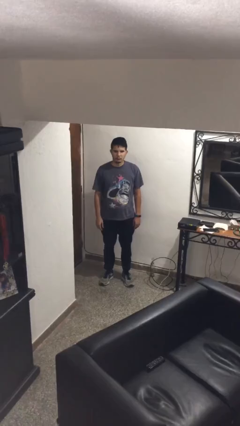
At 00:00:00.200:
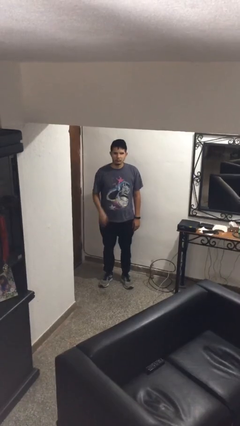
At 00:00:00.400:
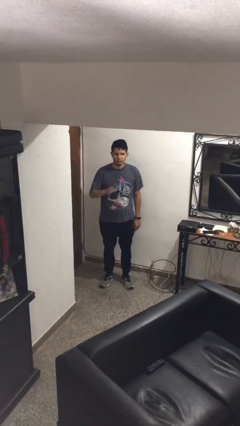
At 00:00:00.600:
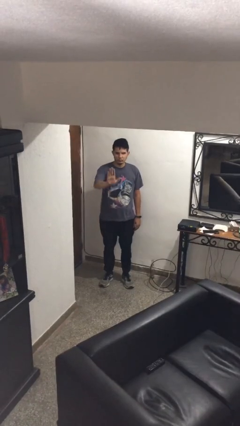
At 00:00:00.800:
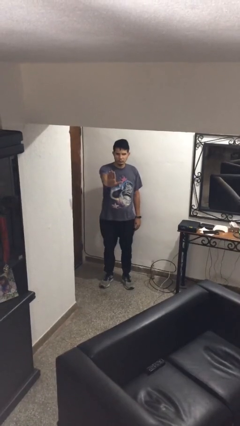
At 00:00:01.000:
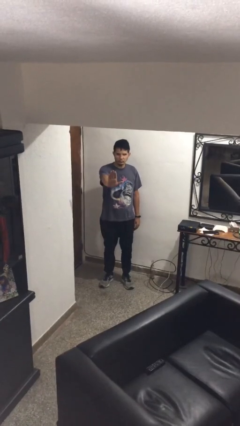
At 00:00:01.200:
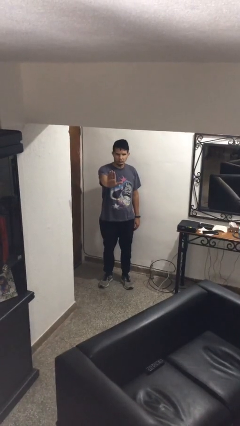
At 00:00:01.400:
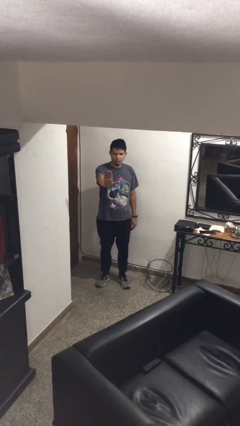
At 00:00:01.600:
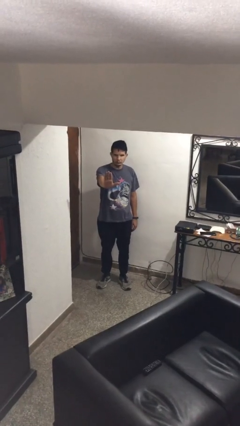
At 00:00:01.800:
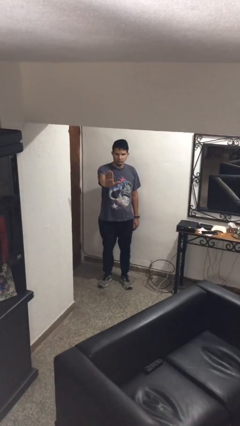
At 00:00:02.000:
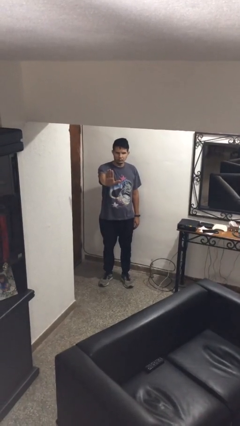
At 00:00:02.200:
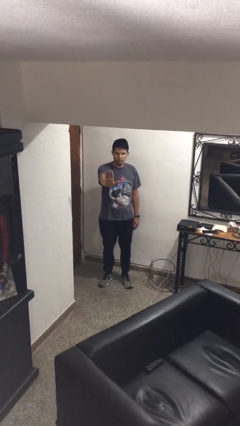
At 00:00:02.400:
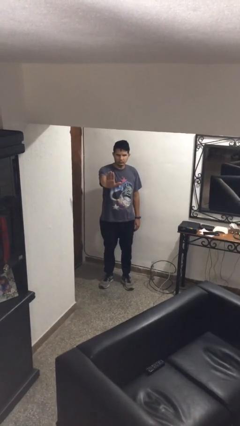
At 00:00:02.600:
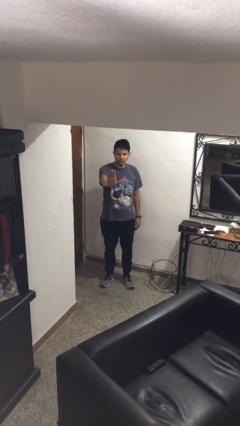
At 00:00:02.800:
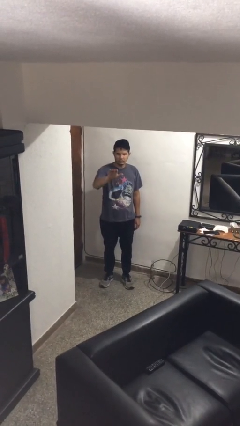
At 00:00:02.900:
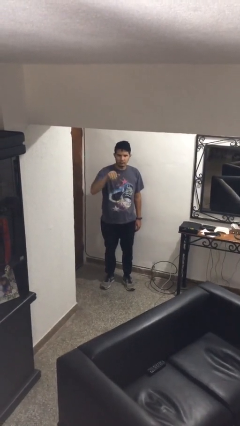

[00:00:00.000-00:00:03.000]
person gestures stop

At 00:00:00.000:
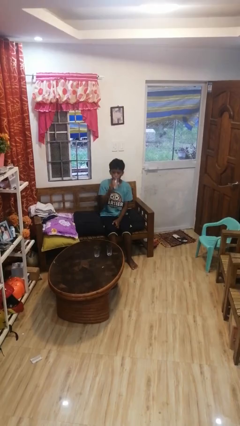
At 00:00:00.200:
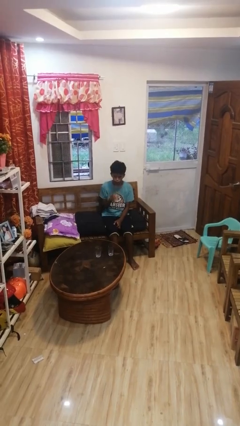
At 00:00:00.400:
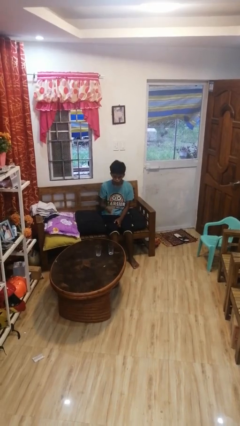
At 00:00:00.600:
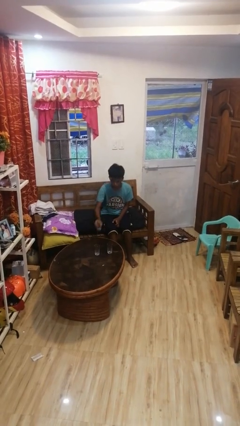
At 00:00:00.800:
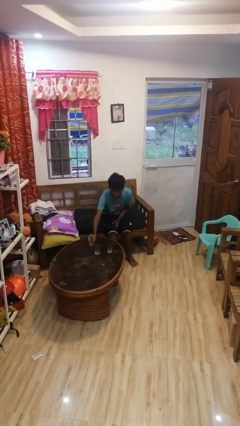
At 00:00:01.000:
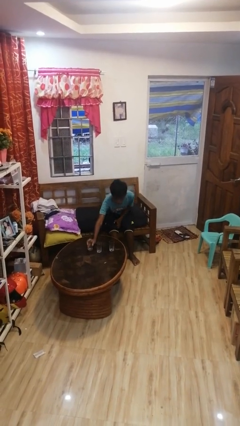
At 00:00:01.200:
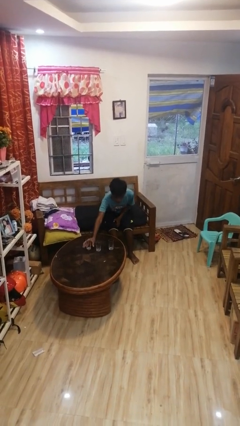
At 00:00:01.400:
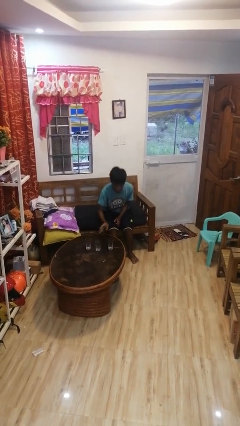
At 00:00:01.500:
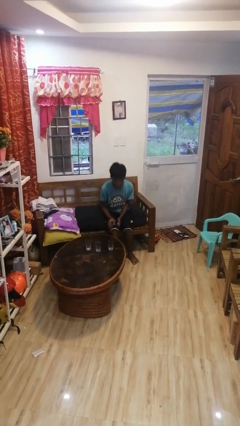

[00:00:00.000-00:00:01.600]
person puts down object on table

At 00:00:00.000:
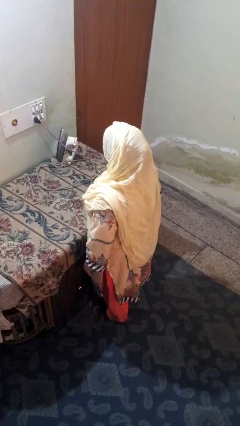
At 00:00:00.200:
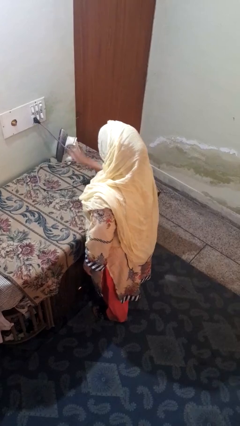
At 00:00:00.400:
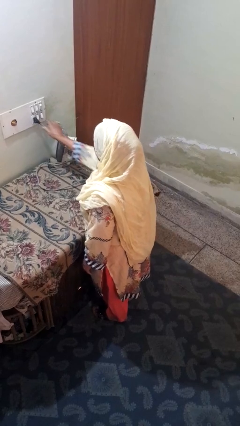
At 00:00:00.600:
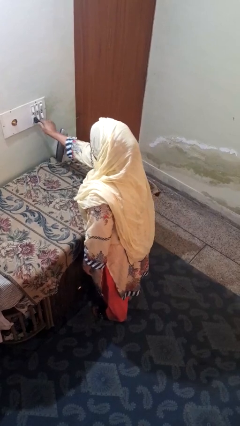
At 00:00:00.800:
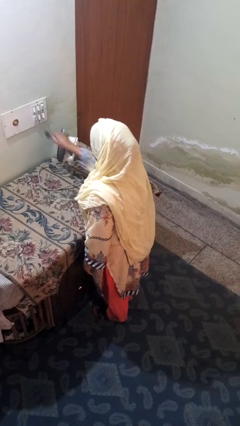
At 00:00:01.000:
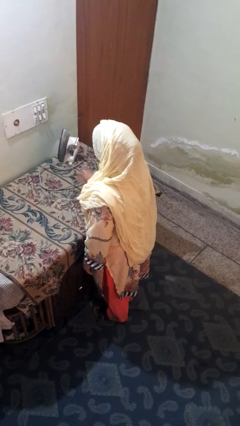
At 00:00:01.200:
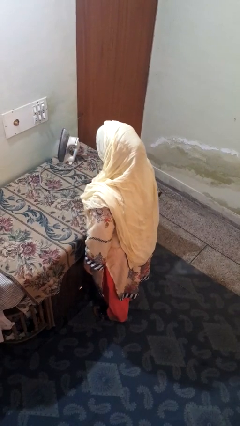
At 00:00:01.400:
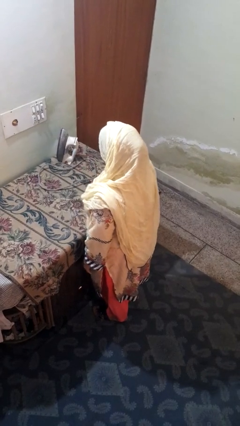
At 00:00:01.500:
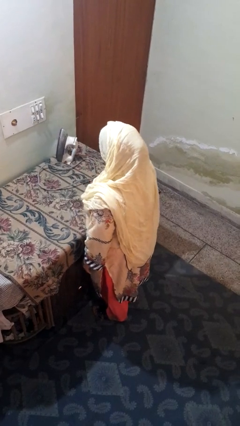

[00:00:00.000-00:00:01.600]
person unplugs from electrical socket

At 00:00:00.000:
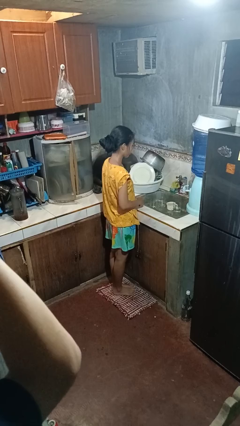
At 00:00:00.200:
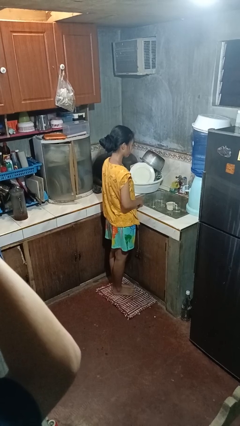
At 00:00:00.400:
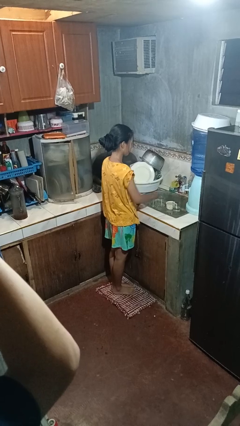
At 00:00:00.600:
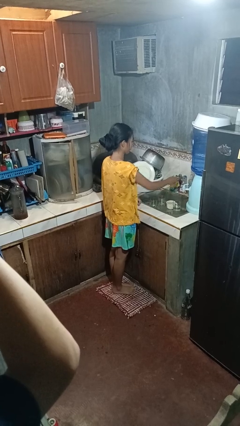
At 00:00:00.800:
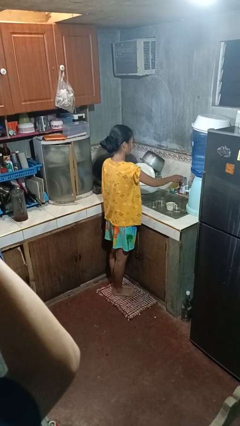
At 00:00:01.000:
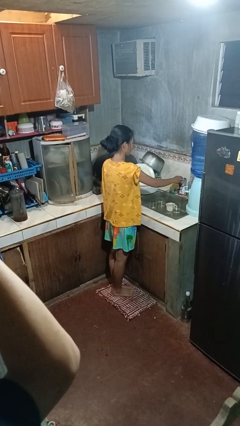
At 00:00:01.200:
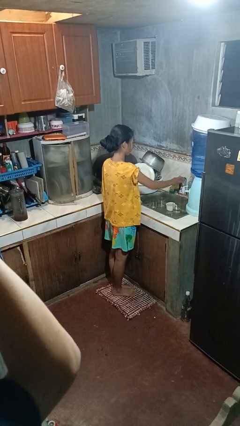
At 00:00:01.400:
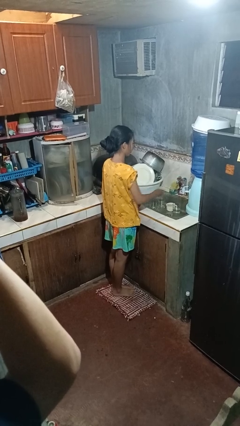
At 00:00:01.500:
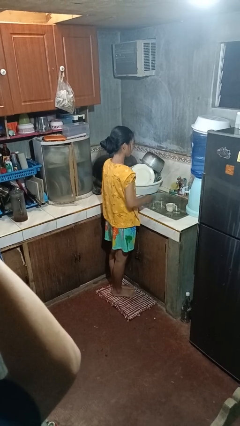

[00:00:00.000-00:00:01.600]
person turns on faucet

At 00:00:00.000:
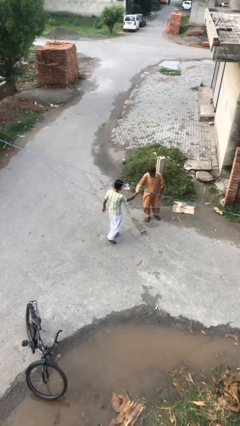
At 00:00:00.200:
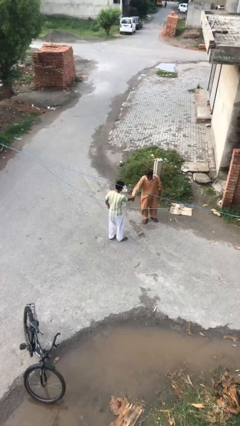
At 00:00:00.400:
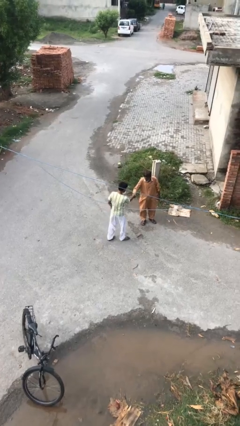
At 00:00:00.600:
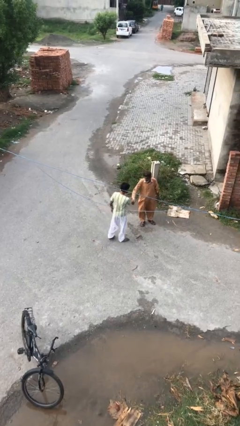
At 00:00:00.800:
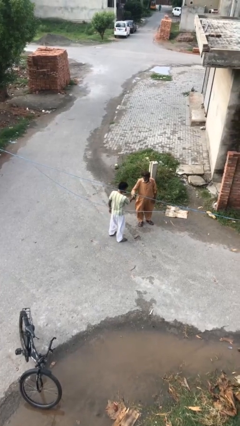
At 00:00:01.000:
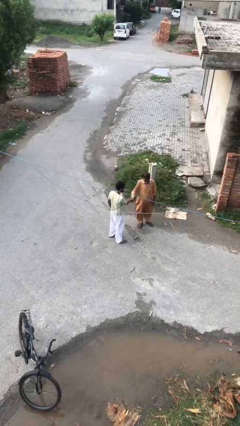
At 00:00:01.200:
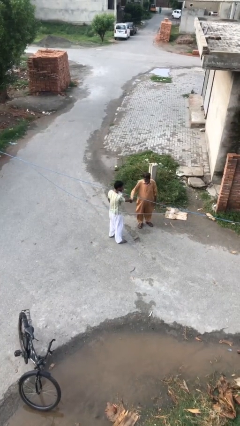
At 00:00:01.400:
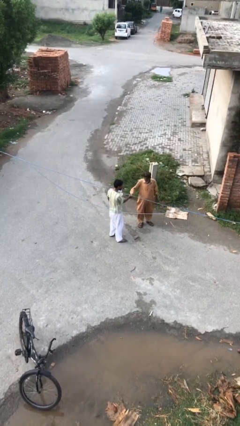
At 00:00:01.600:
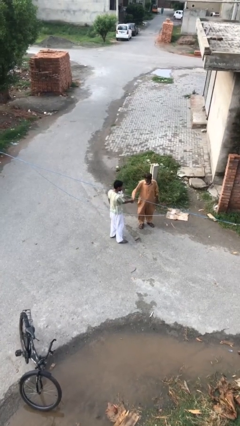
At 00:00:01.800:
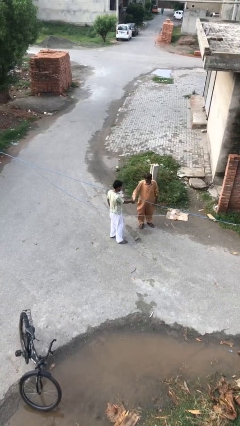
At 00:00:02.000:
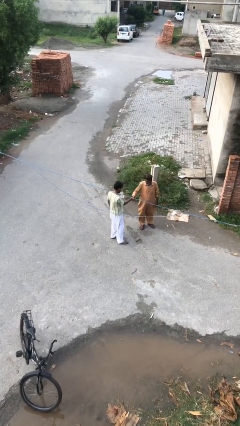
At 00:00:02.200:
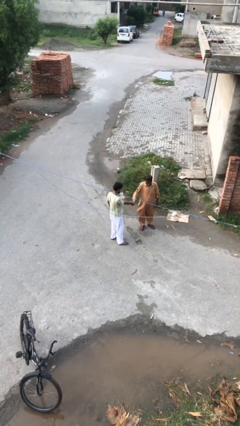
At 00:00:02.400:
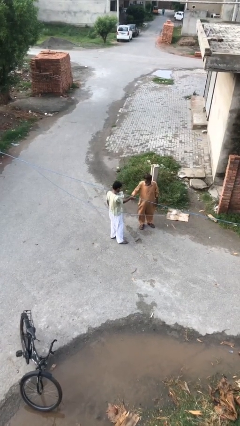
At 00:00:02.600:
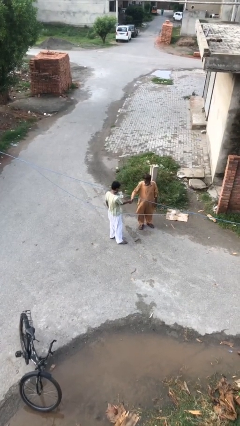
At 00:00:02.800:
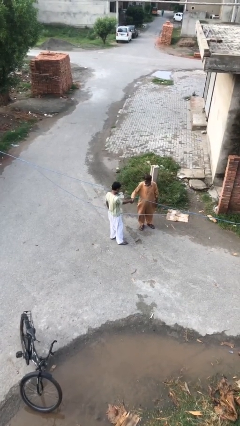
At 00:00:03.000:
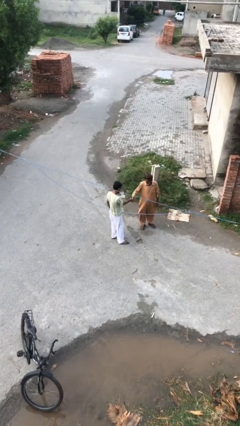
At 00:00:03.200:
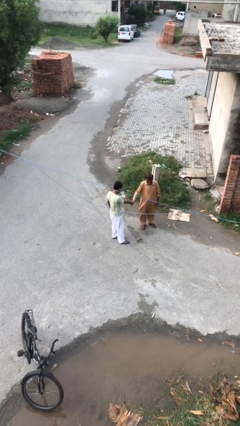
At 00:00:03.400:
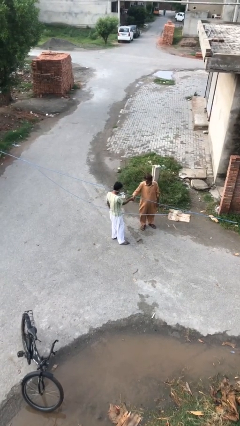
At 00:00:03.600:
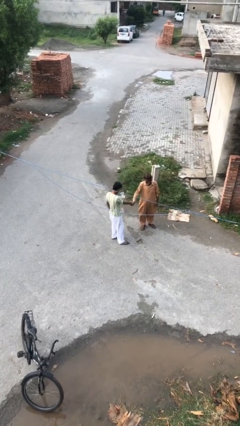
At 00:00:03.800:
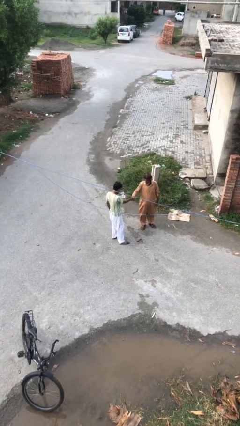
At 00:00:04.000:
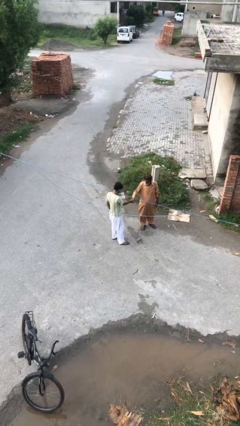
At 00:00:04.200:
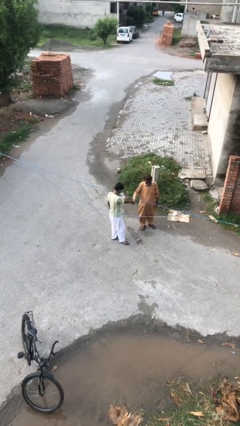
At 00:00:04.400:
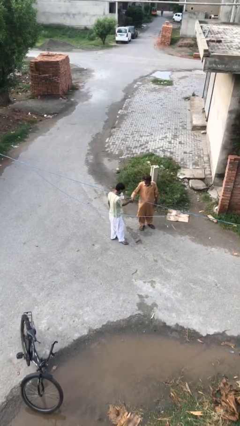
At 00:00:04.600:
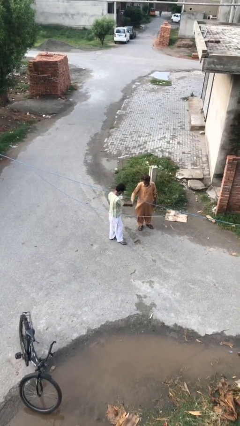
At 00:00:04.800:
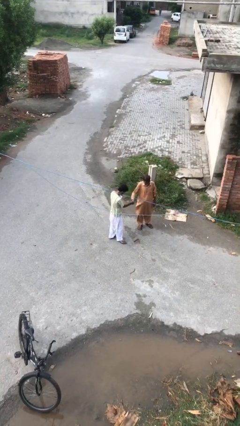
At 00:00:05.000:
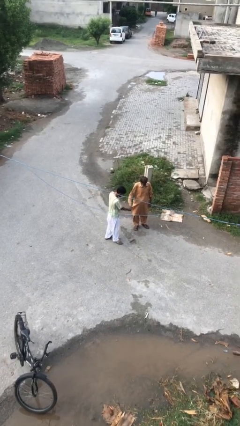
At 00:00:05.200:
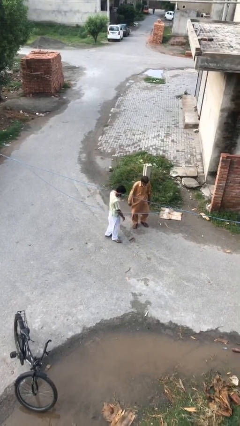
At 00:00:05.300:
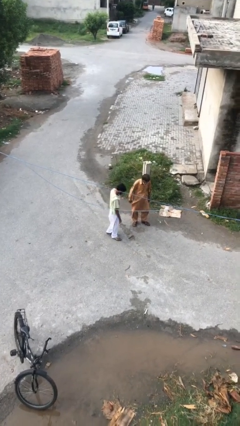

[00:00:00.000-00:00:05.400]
person shakes hand

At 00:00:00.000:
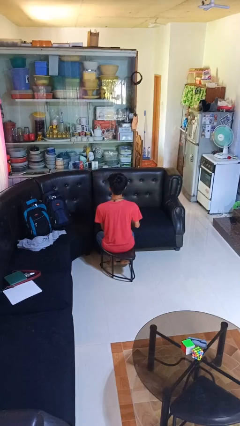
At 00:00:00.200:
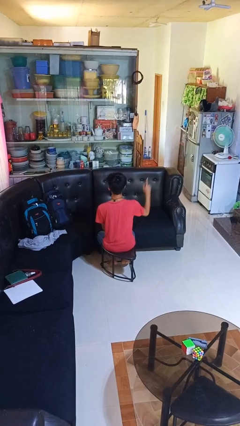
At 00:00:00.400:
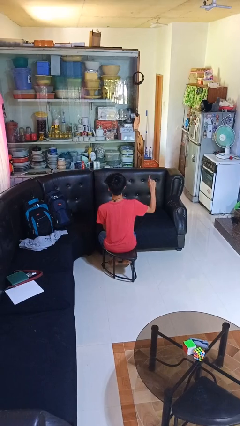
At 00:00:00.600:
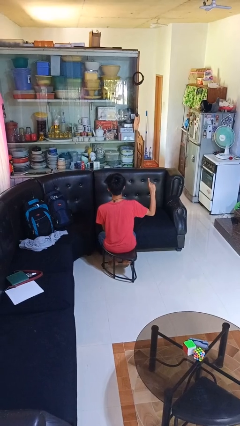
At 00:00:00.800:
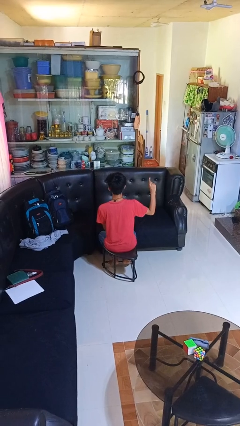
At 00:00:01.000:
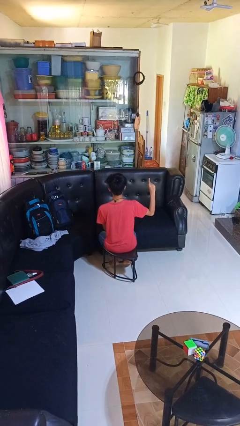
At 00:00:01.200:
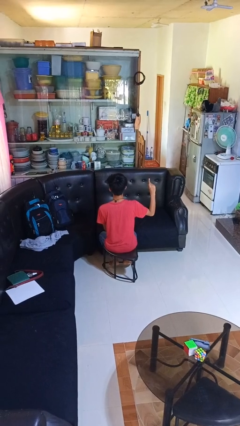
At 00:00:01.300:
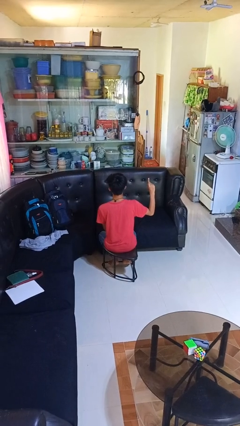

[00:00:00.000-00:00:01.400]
person gestures number one

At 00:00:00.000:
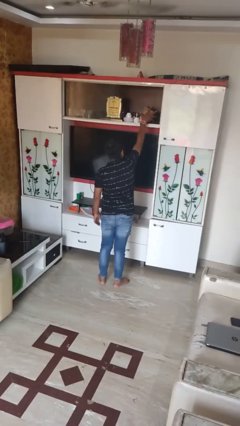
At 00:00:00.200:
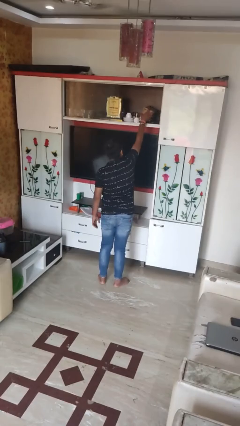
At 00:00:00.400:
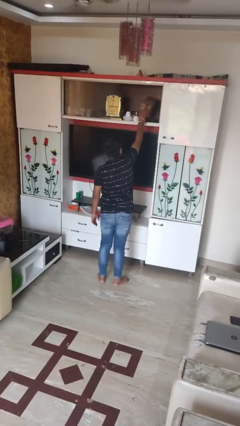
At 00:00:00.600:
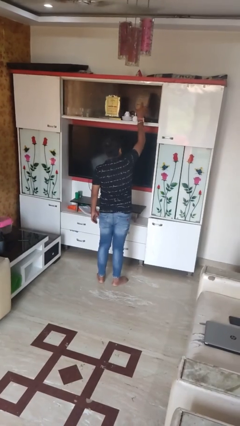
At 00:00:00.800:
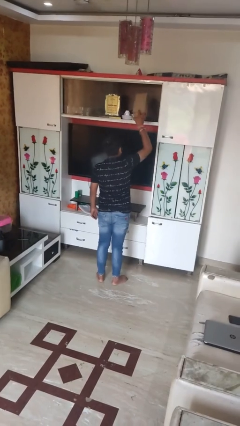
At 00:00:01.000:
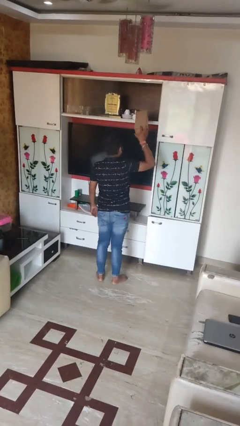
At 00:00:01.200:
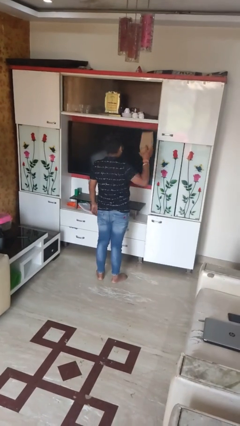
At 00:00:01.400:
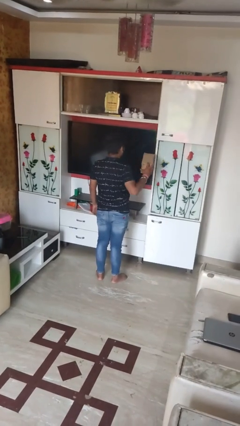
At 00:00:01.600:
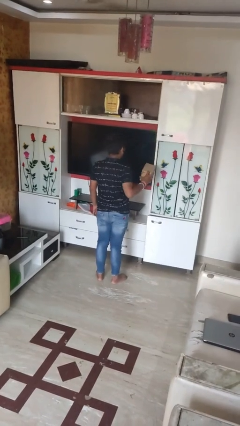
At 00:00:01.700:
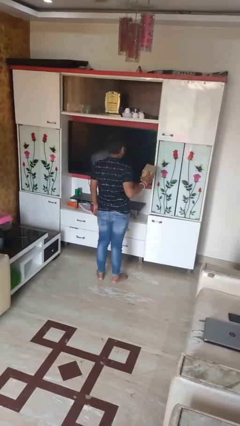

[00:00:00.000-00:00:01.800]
person picks up object from shelf

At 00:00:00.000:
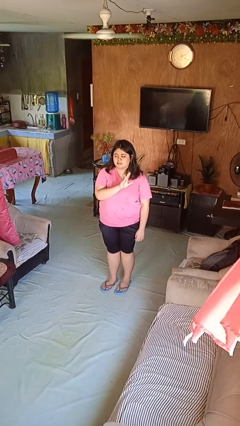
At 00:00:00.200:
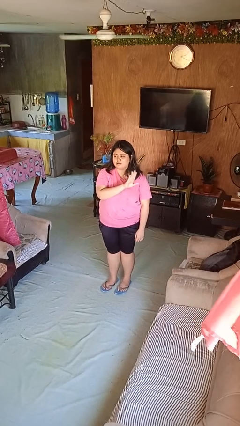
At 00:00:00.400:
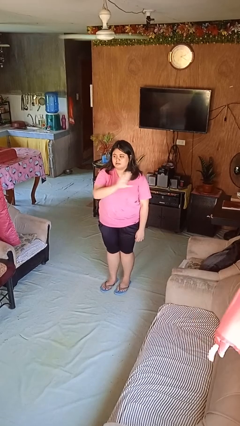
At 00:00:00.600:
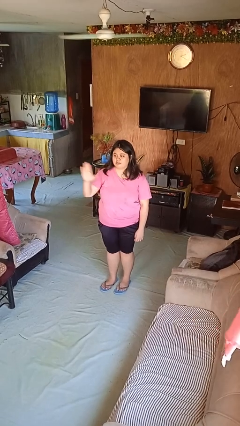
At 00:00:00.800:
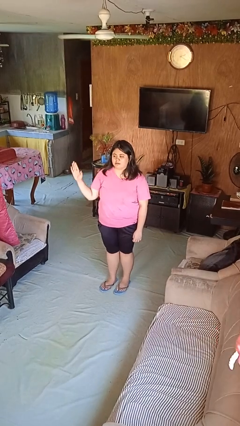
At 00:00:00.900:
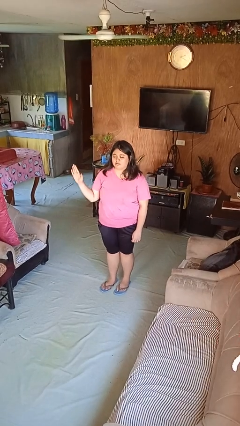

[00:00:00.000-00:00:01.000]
person gestures swipe right
